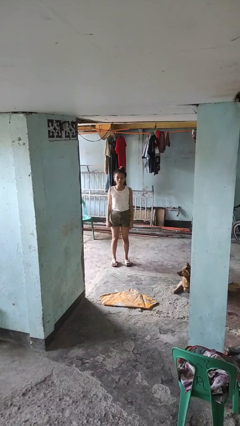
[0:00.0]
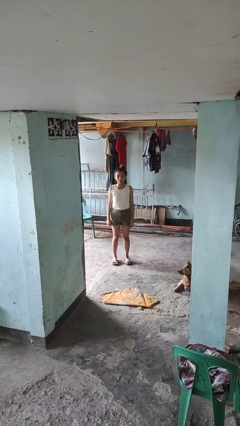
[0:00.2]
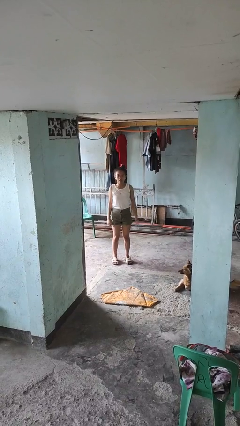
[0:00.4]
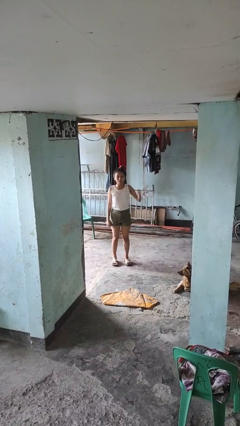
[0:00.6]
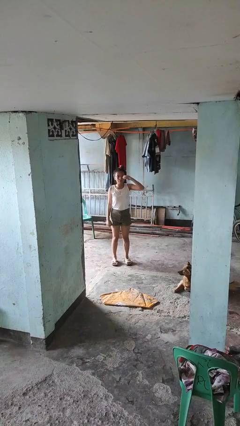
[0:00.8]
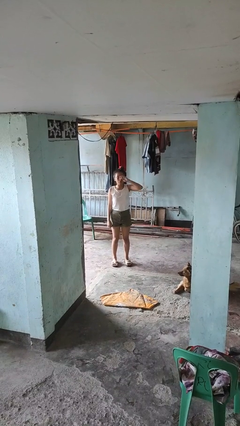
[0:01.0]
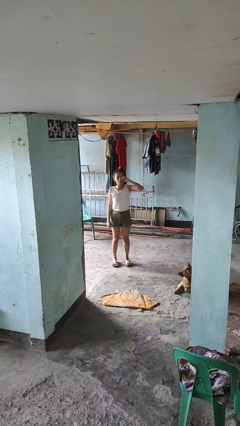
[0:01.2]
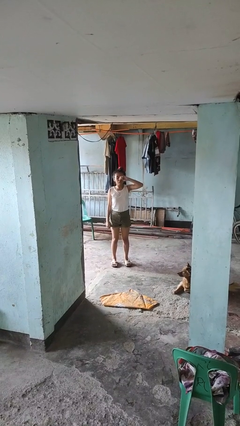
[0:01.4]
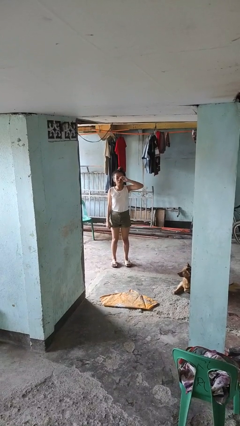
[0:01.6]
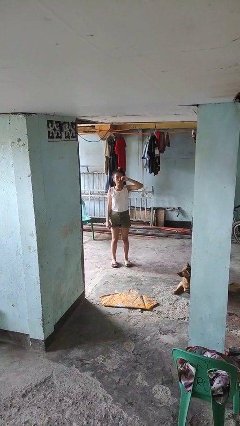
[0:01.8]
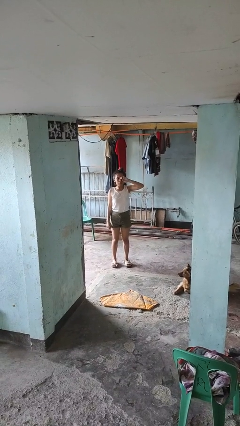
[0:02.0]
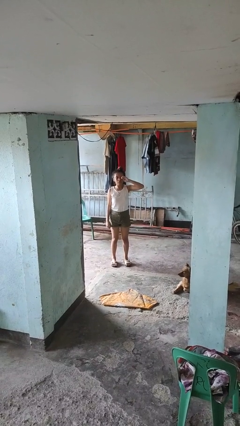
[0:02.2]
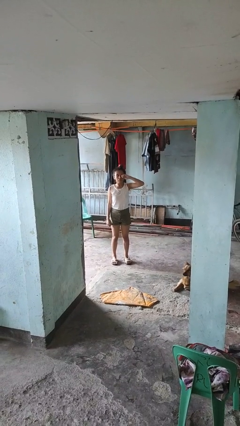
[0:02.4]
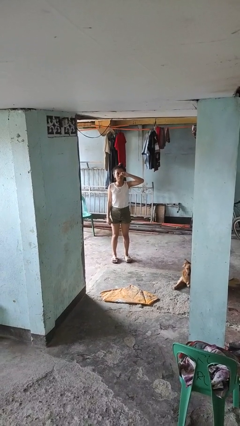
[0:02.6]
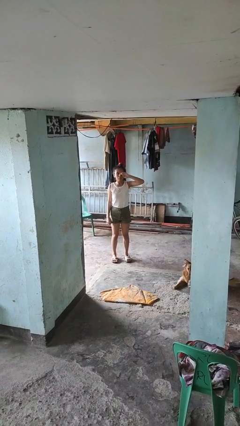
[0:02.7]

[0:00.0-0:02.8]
person rubs eyes

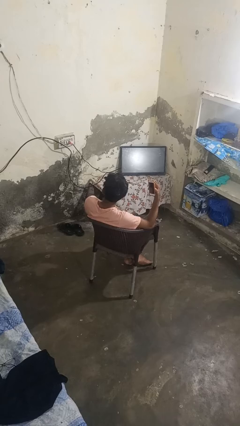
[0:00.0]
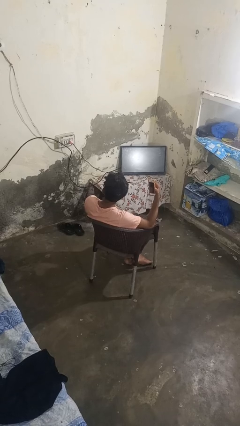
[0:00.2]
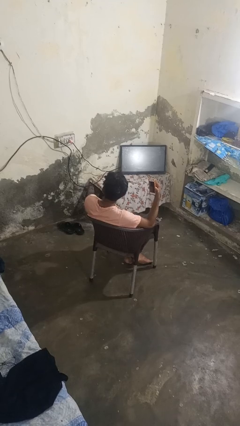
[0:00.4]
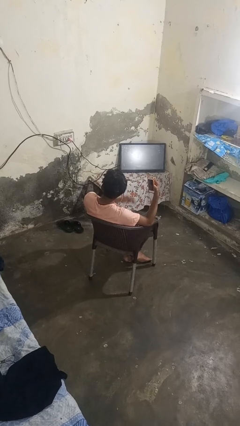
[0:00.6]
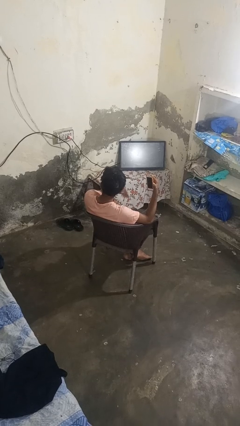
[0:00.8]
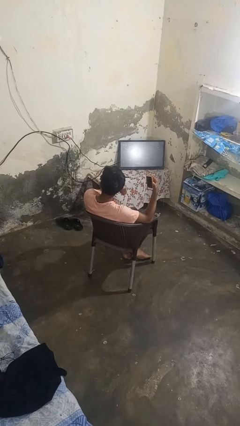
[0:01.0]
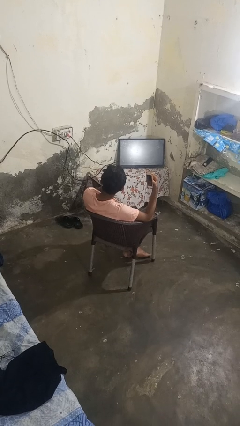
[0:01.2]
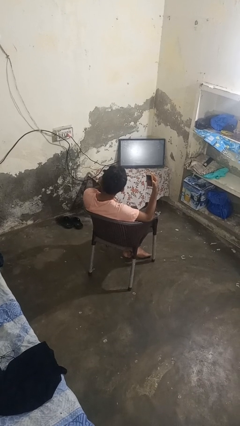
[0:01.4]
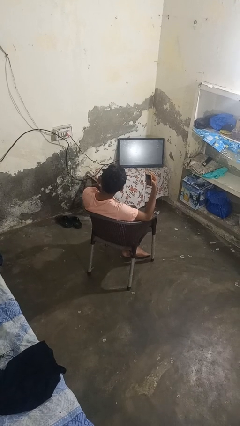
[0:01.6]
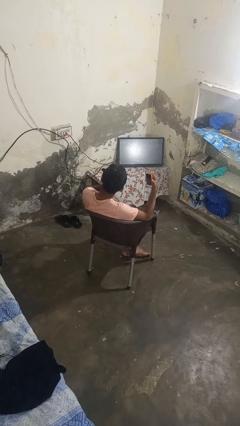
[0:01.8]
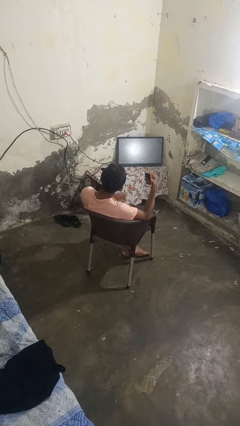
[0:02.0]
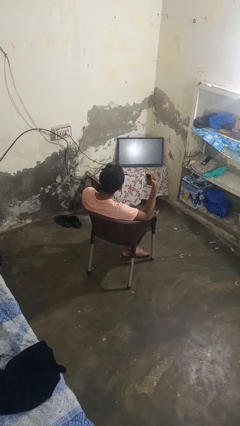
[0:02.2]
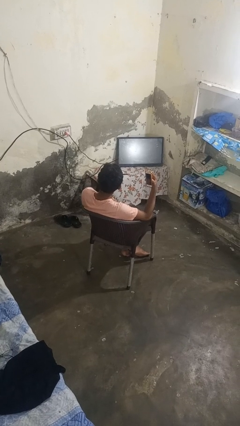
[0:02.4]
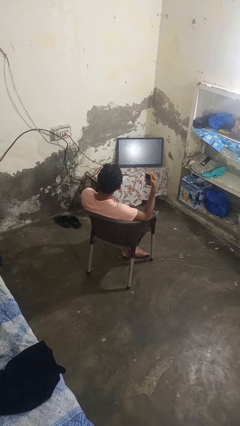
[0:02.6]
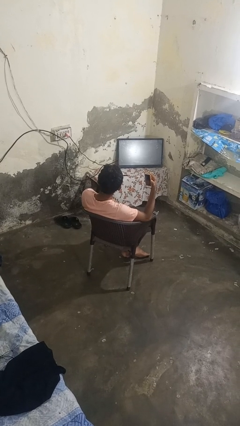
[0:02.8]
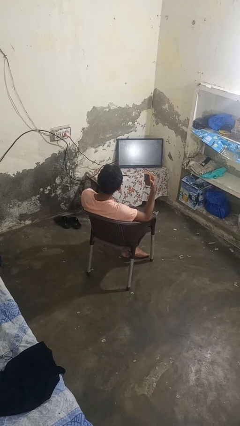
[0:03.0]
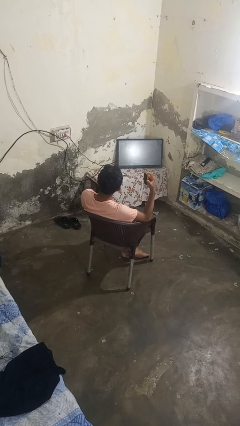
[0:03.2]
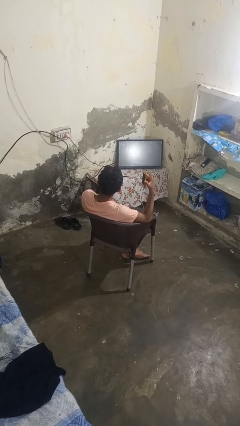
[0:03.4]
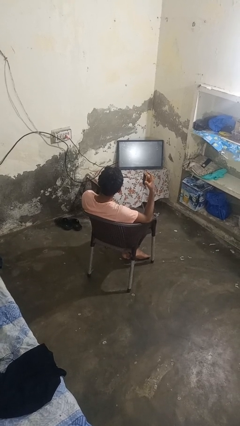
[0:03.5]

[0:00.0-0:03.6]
person takes off headphones

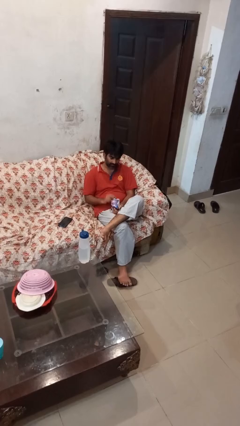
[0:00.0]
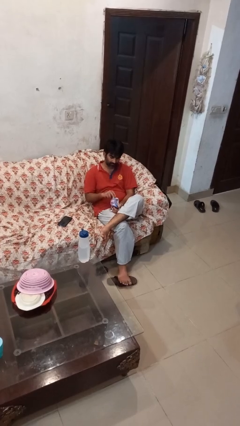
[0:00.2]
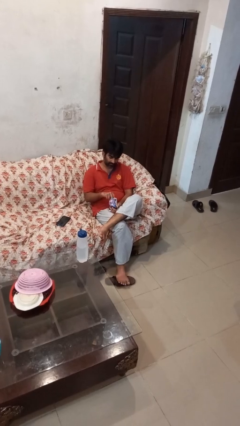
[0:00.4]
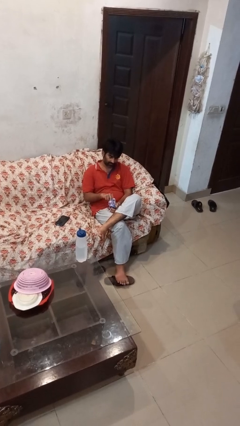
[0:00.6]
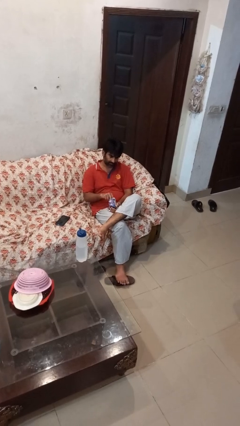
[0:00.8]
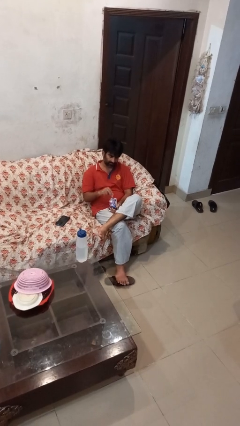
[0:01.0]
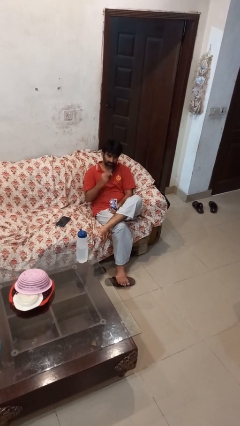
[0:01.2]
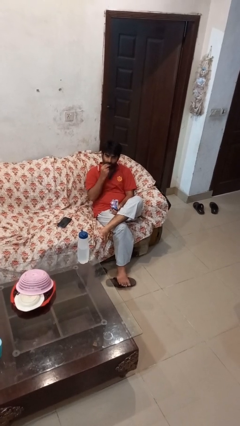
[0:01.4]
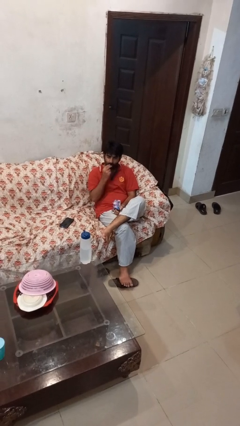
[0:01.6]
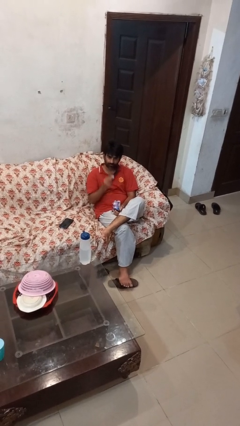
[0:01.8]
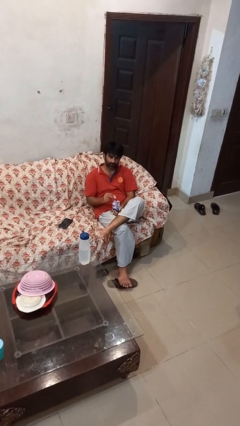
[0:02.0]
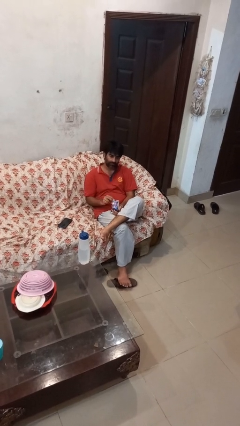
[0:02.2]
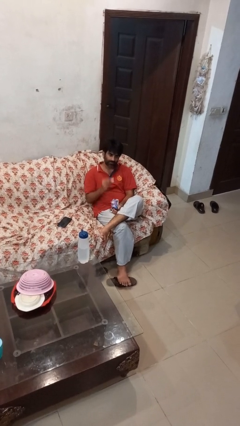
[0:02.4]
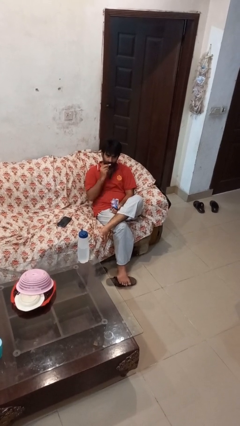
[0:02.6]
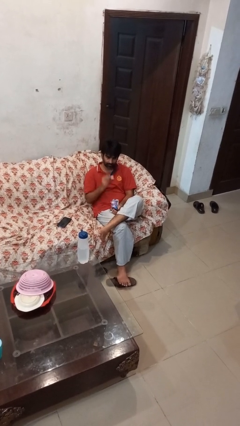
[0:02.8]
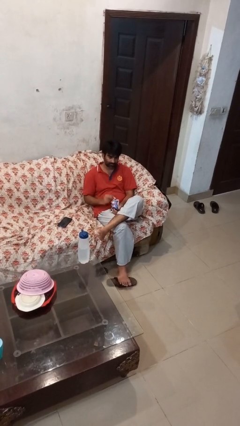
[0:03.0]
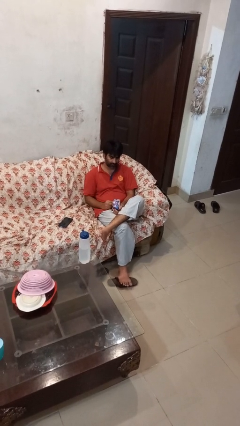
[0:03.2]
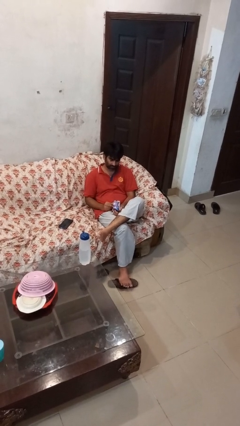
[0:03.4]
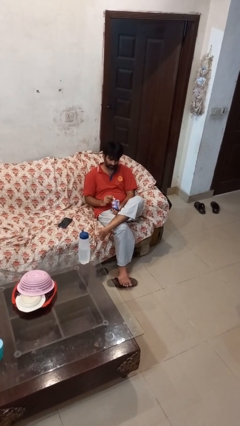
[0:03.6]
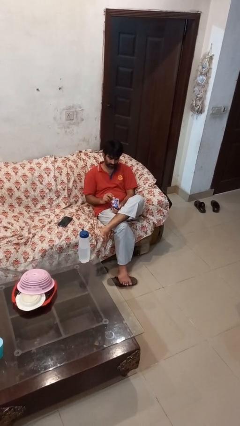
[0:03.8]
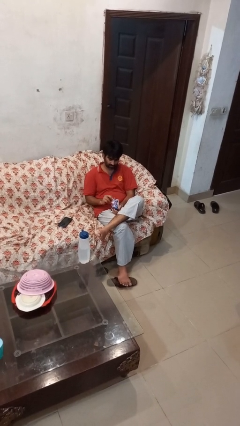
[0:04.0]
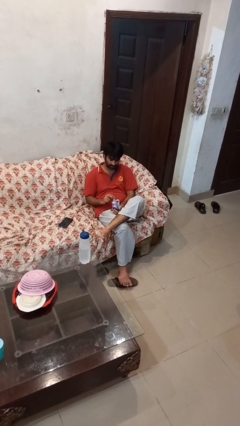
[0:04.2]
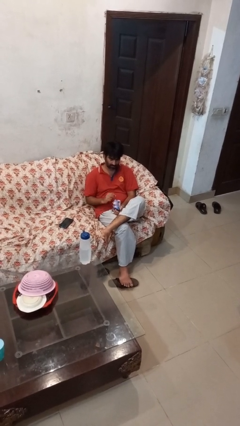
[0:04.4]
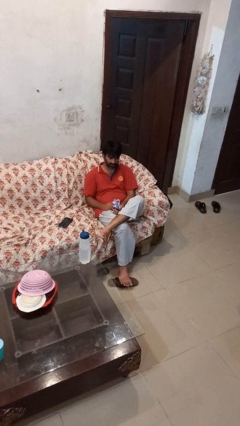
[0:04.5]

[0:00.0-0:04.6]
person eats snack from bag

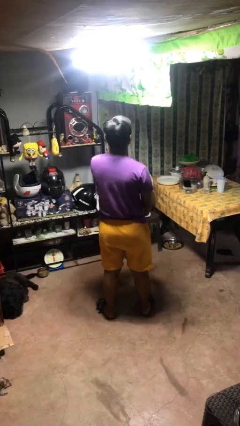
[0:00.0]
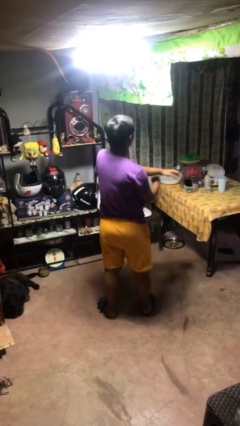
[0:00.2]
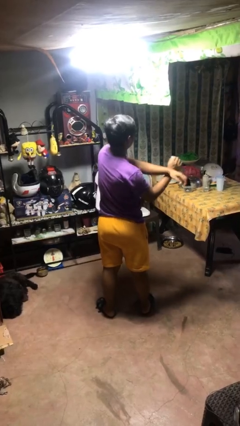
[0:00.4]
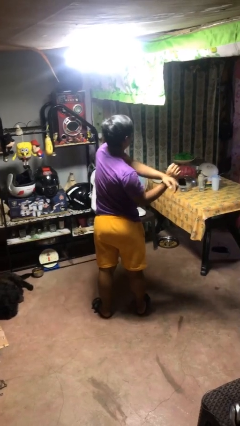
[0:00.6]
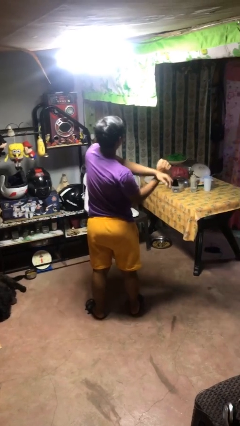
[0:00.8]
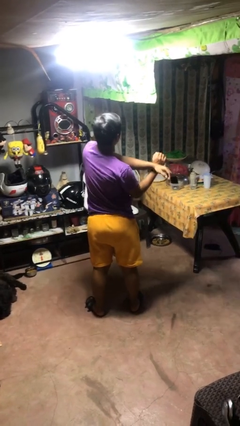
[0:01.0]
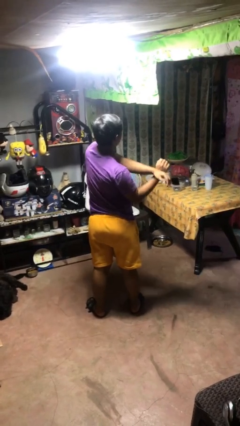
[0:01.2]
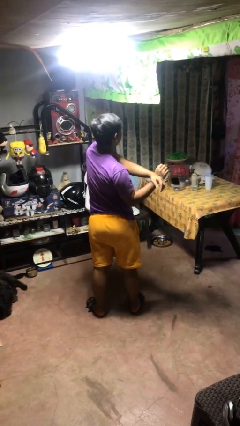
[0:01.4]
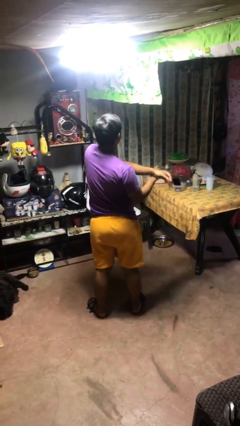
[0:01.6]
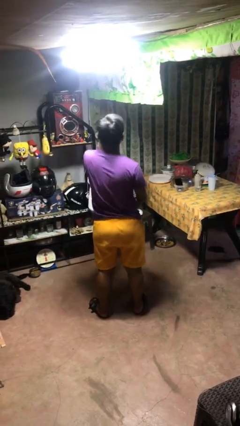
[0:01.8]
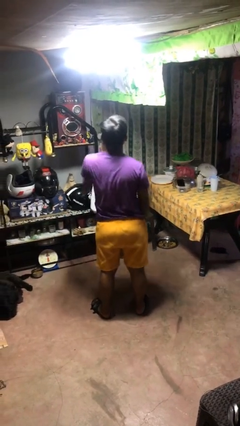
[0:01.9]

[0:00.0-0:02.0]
person crosses arms

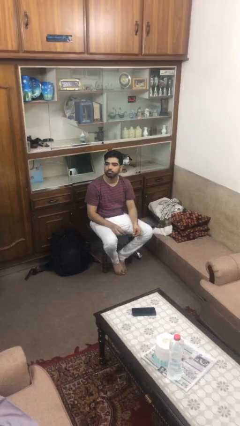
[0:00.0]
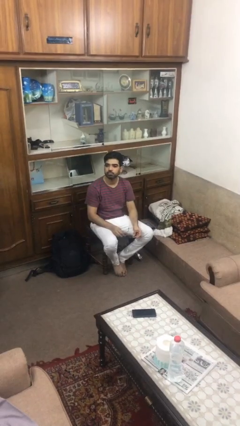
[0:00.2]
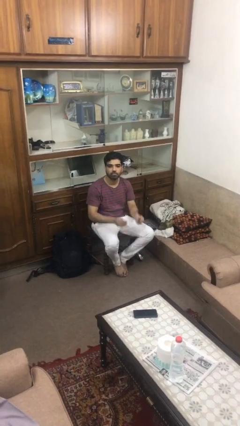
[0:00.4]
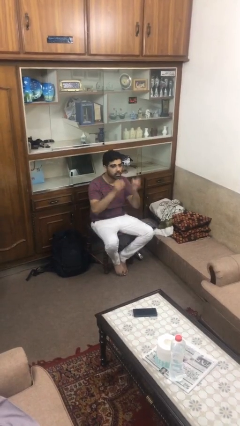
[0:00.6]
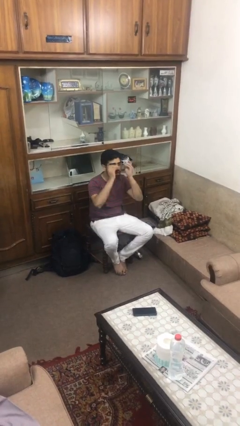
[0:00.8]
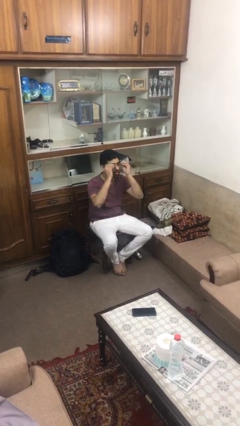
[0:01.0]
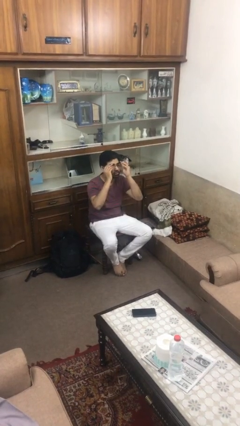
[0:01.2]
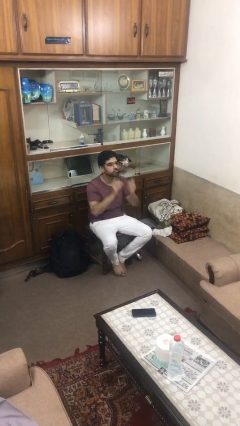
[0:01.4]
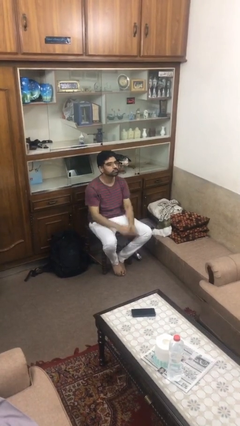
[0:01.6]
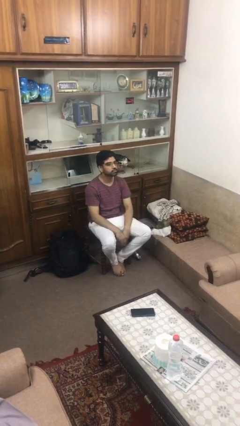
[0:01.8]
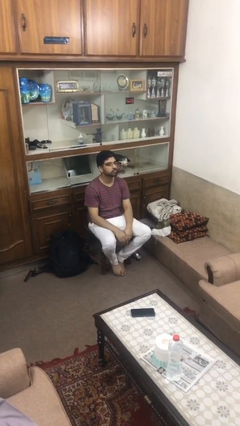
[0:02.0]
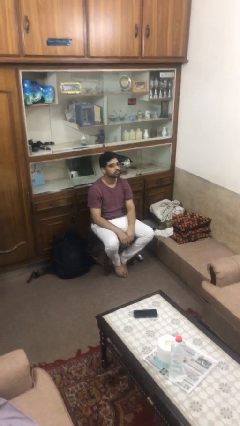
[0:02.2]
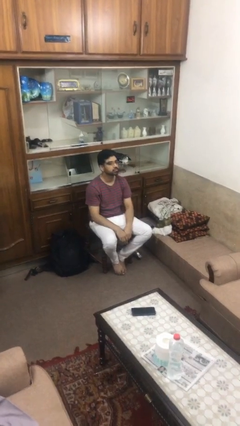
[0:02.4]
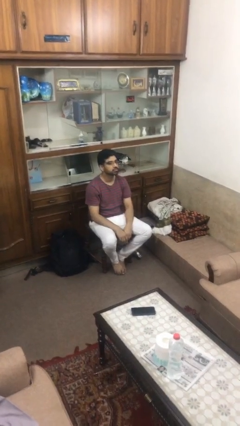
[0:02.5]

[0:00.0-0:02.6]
person puts on glasses

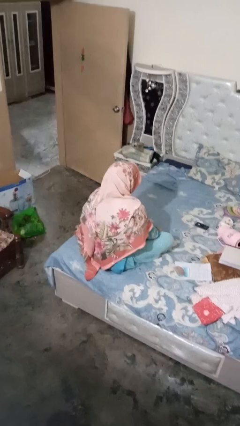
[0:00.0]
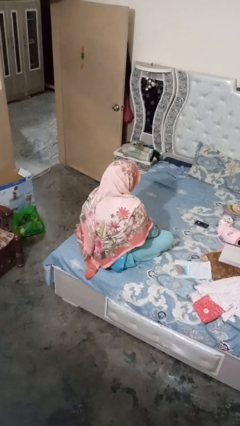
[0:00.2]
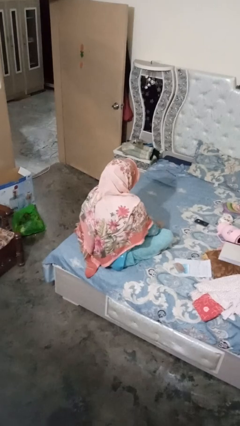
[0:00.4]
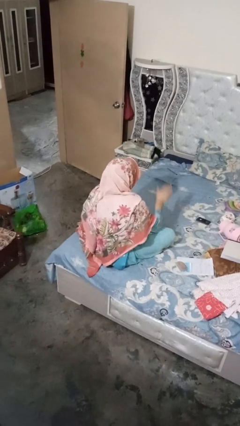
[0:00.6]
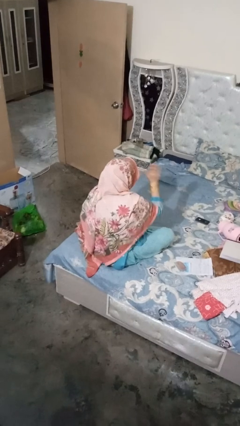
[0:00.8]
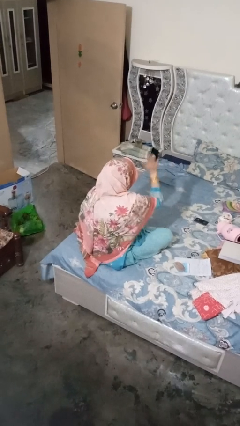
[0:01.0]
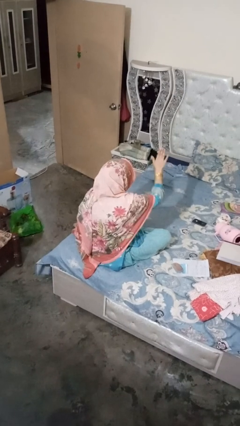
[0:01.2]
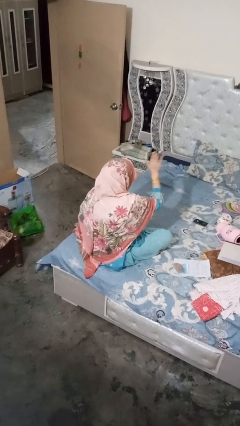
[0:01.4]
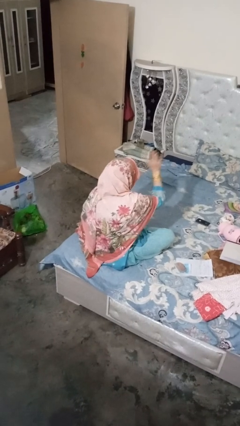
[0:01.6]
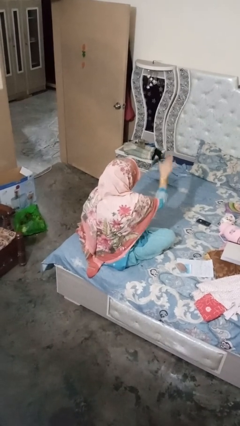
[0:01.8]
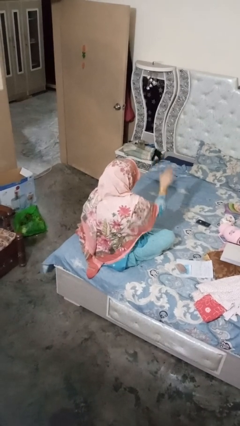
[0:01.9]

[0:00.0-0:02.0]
person gestures stop
